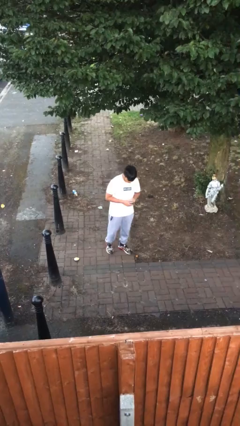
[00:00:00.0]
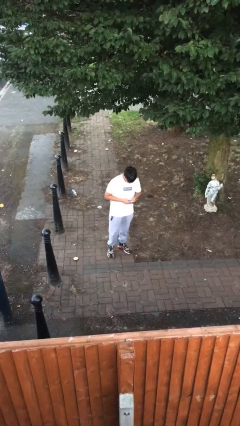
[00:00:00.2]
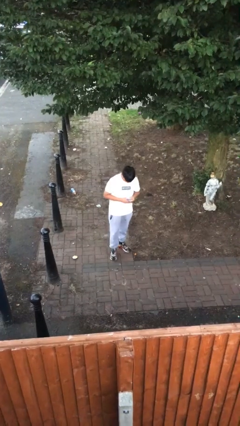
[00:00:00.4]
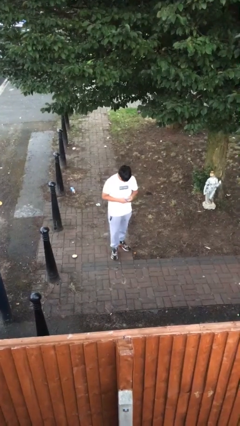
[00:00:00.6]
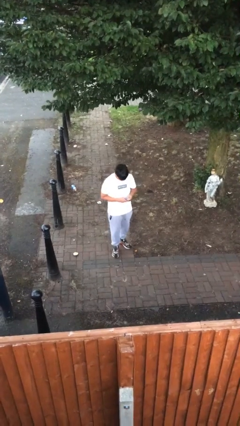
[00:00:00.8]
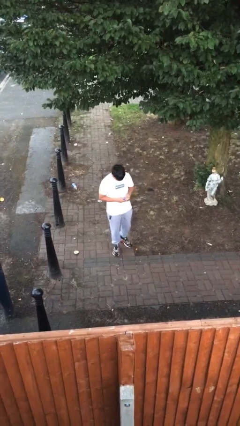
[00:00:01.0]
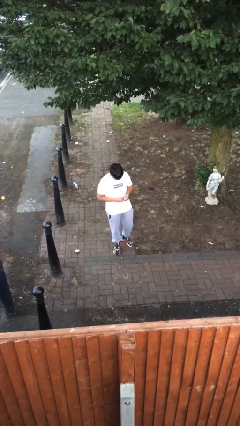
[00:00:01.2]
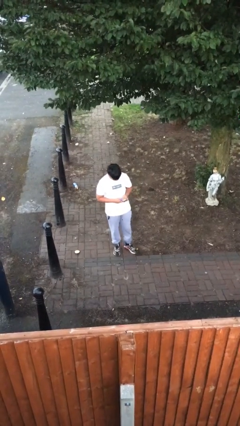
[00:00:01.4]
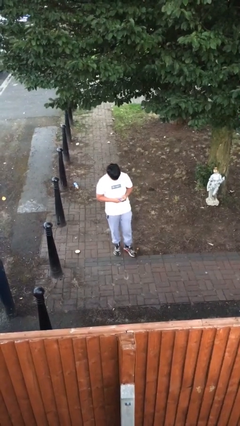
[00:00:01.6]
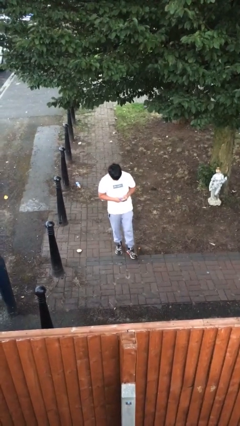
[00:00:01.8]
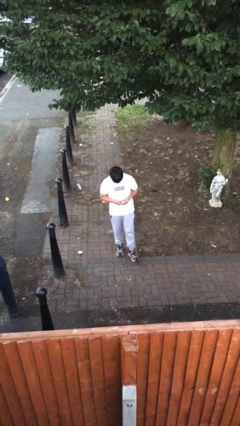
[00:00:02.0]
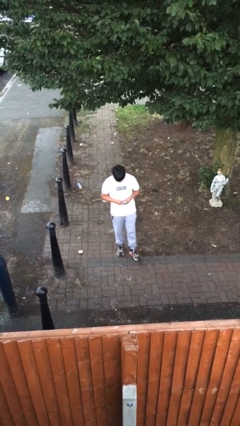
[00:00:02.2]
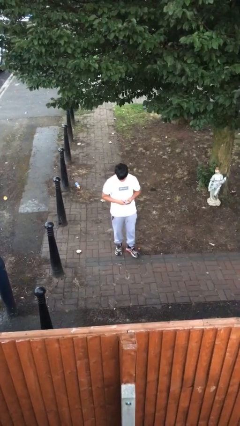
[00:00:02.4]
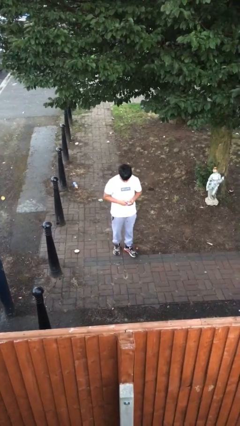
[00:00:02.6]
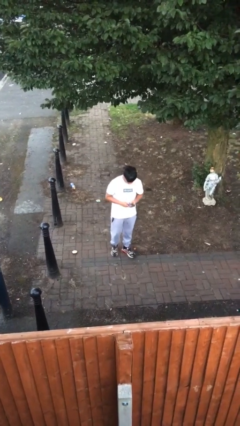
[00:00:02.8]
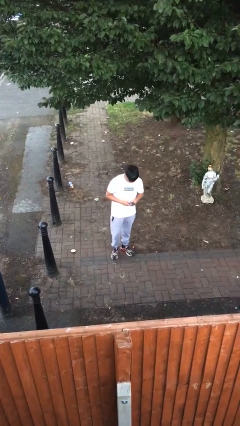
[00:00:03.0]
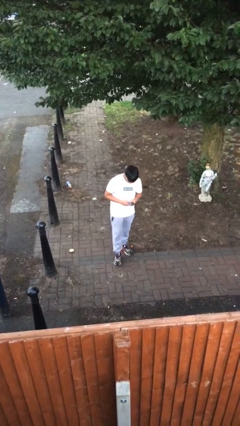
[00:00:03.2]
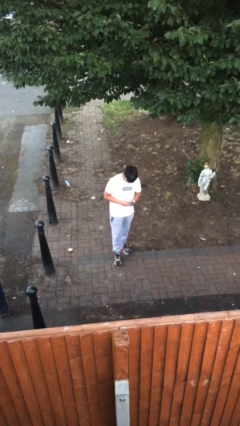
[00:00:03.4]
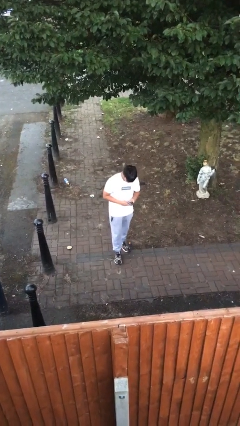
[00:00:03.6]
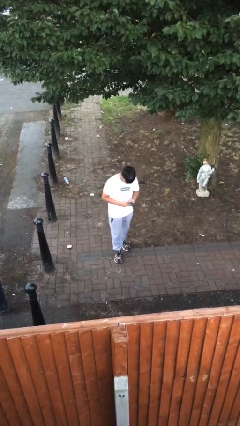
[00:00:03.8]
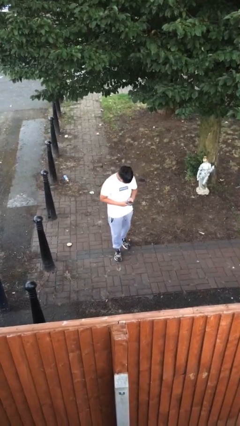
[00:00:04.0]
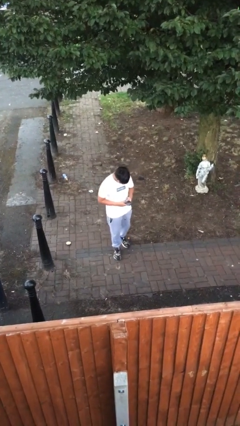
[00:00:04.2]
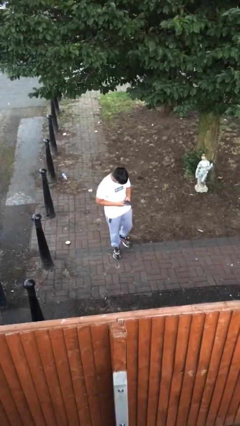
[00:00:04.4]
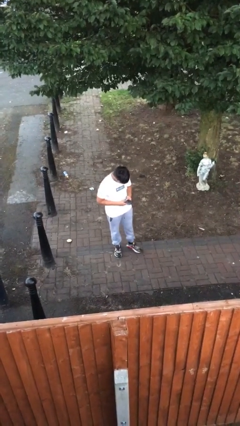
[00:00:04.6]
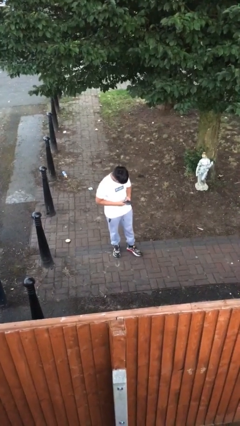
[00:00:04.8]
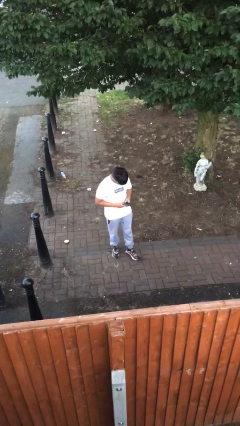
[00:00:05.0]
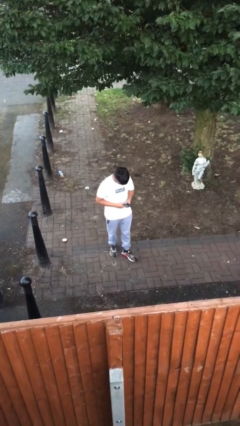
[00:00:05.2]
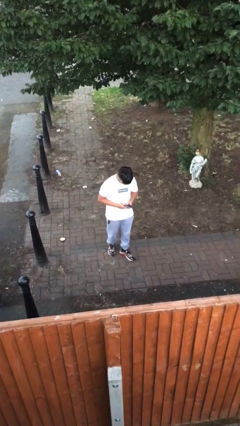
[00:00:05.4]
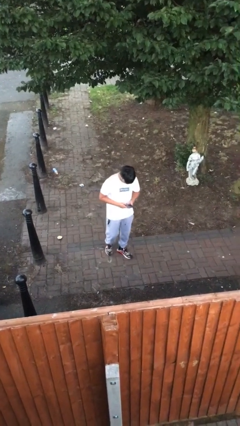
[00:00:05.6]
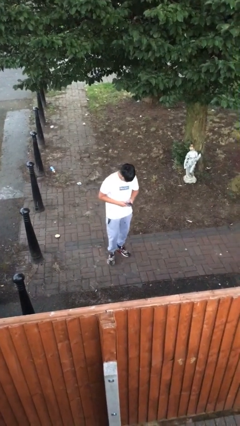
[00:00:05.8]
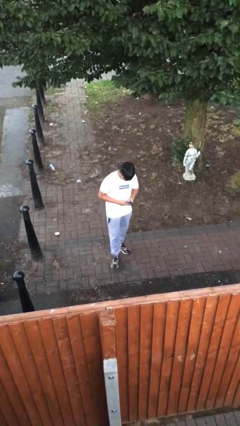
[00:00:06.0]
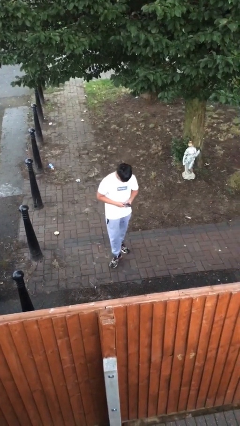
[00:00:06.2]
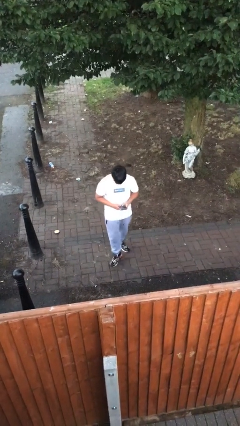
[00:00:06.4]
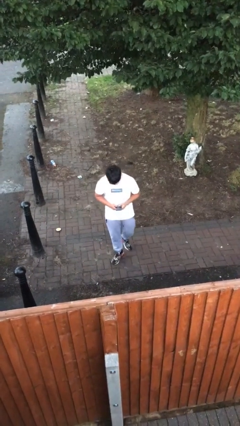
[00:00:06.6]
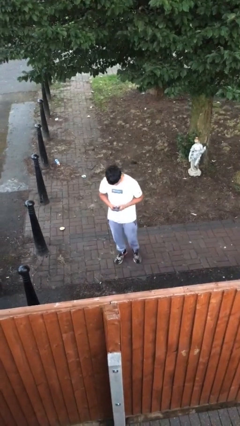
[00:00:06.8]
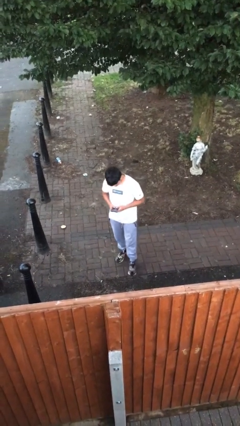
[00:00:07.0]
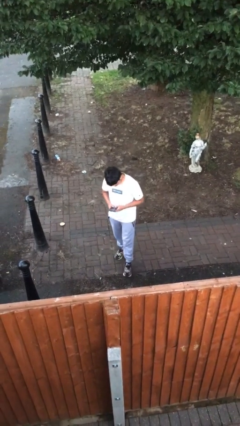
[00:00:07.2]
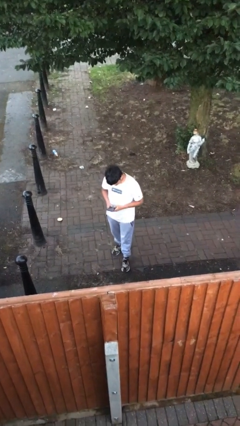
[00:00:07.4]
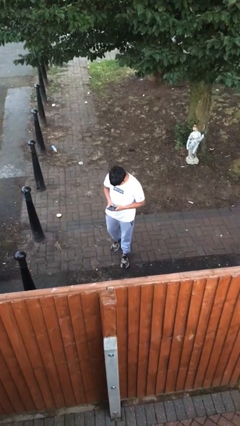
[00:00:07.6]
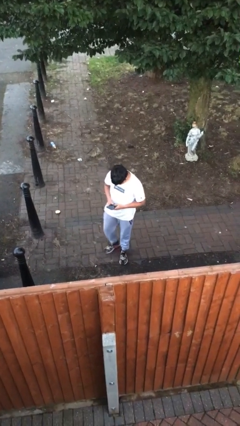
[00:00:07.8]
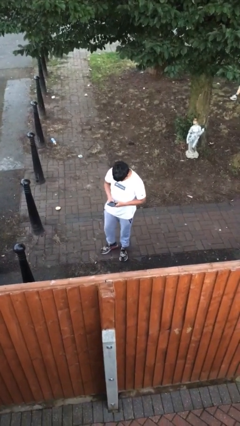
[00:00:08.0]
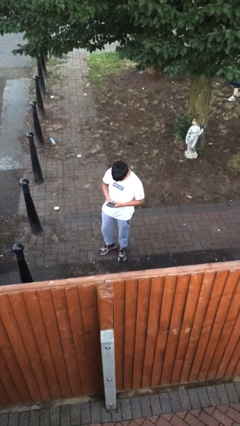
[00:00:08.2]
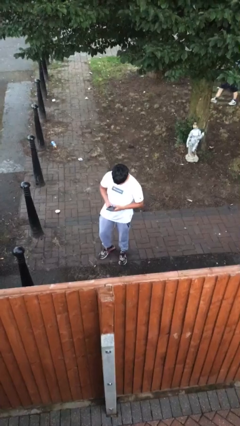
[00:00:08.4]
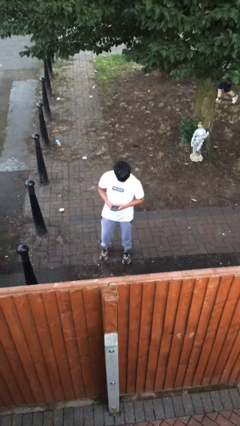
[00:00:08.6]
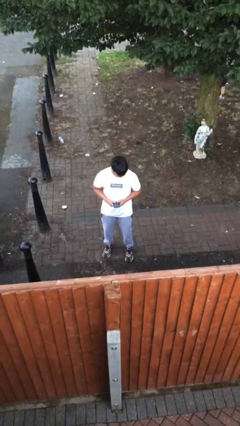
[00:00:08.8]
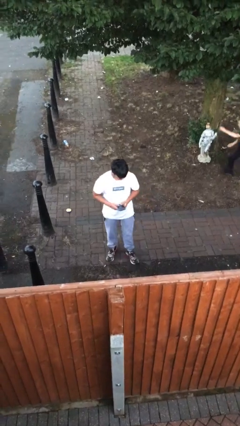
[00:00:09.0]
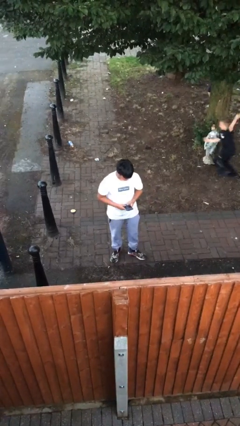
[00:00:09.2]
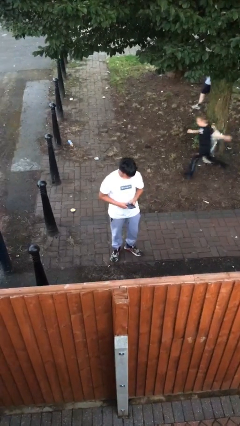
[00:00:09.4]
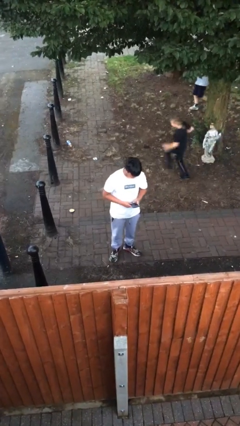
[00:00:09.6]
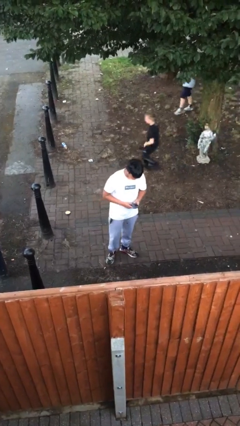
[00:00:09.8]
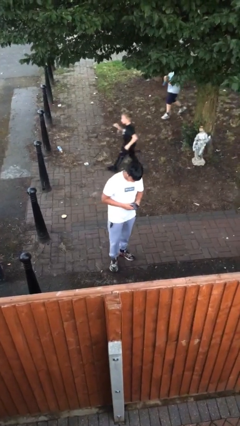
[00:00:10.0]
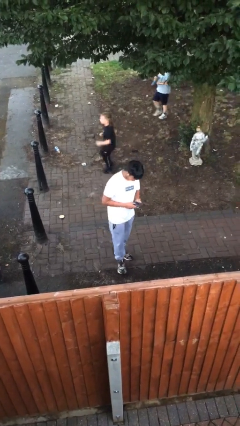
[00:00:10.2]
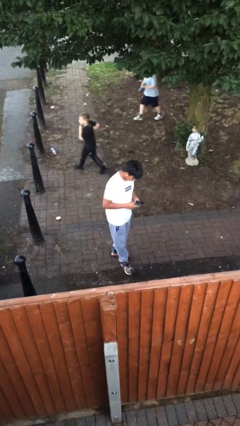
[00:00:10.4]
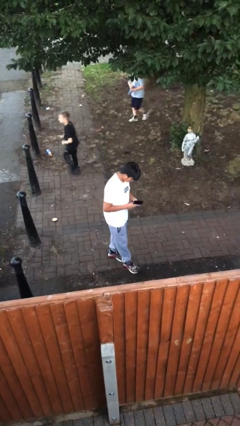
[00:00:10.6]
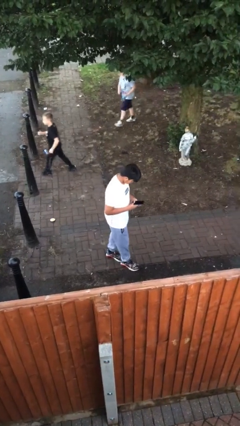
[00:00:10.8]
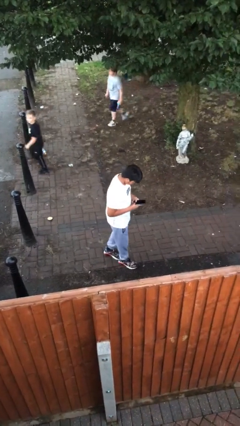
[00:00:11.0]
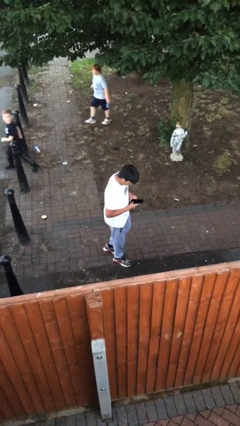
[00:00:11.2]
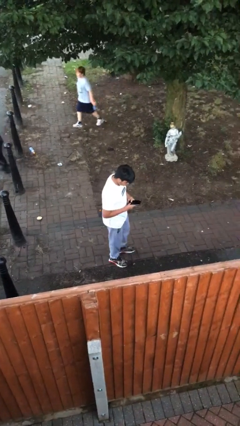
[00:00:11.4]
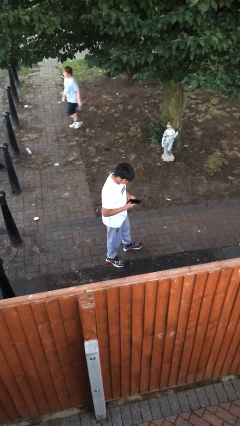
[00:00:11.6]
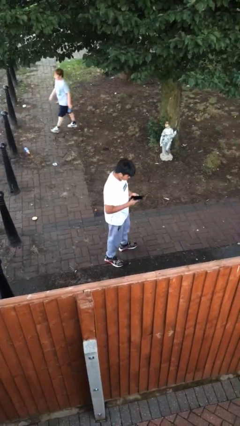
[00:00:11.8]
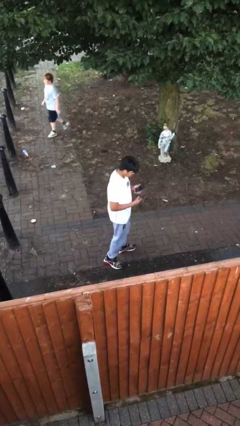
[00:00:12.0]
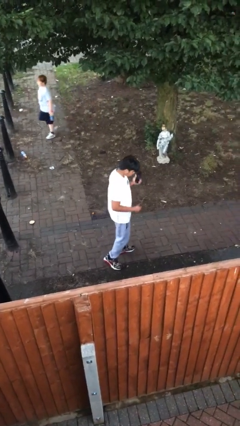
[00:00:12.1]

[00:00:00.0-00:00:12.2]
person texts on phone

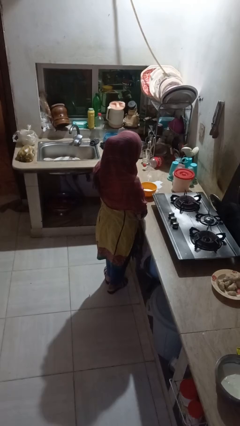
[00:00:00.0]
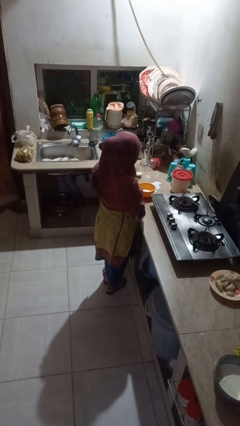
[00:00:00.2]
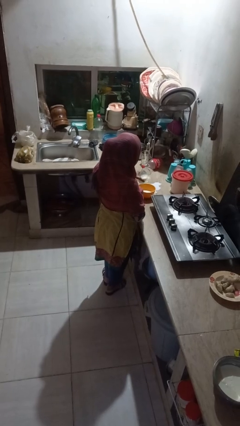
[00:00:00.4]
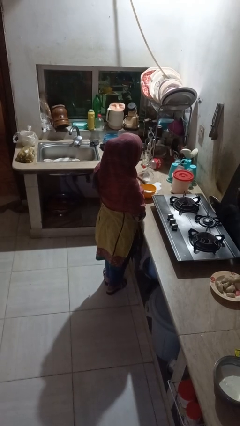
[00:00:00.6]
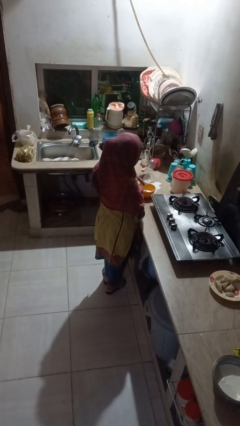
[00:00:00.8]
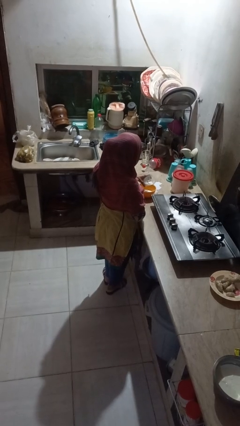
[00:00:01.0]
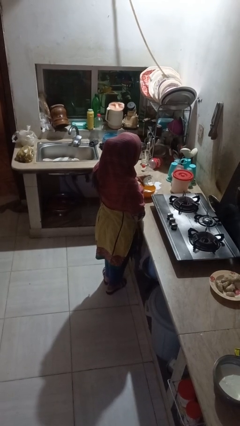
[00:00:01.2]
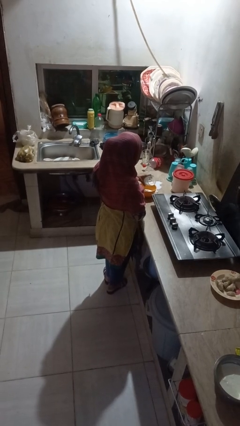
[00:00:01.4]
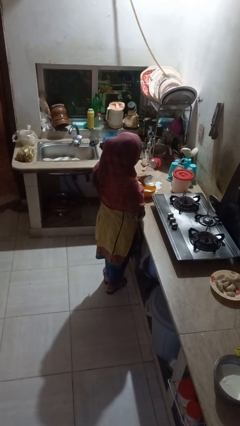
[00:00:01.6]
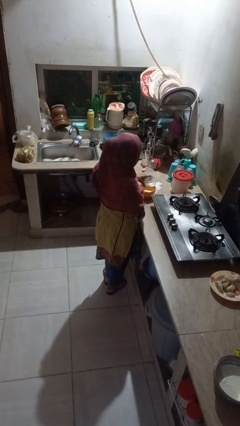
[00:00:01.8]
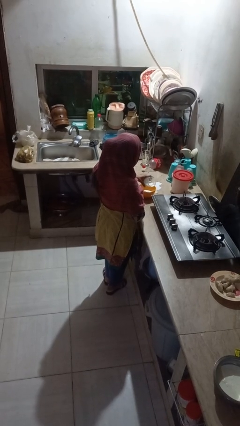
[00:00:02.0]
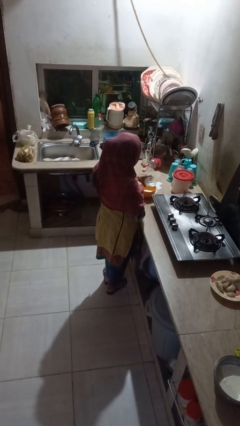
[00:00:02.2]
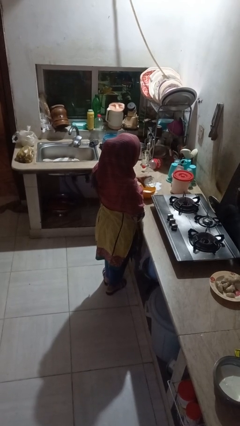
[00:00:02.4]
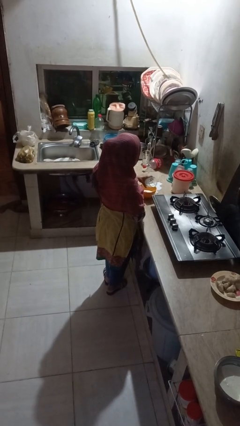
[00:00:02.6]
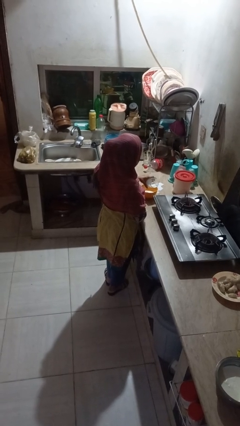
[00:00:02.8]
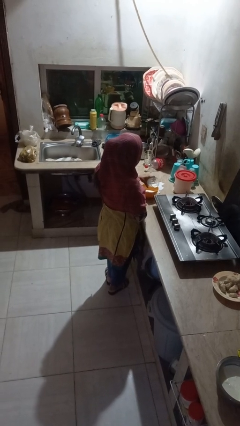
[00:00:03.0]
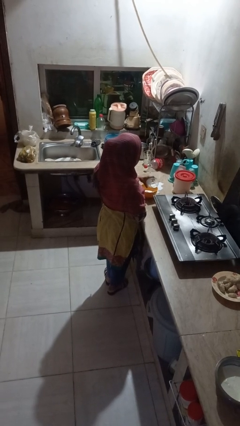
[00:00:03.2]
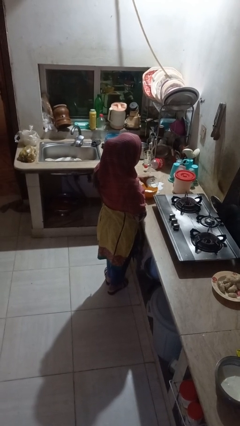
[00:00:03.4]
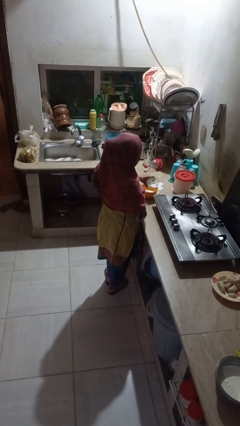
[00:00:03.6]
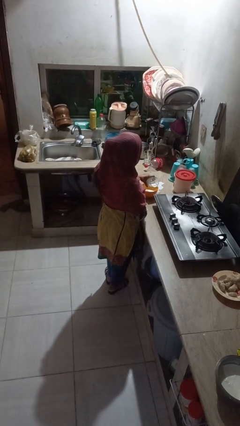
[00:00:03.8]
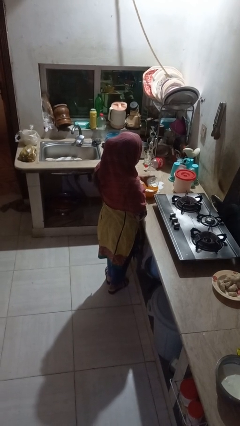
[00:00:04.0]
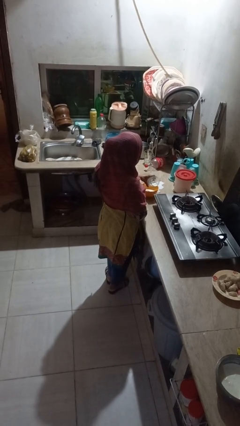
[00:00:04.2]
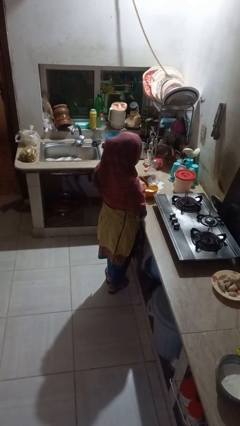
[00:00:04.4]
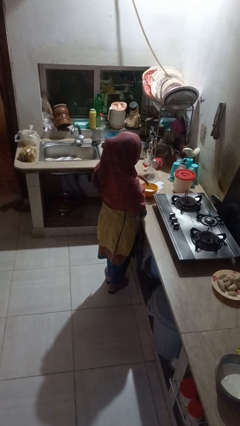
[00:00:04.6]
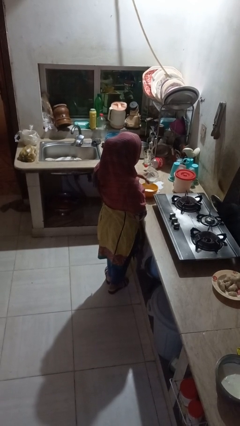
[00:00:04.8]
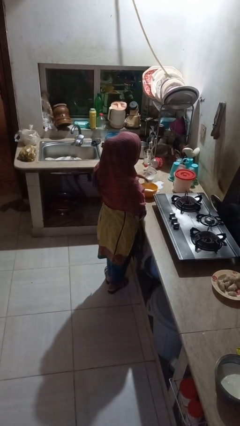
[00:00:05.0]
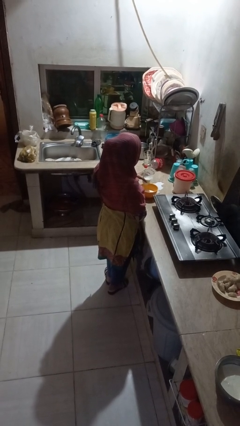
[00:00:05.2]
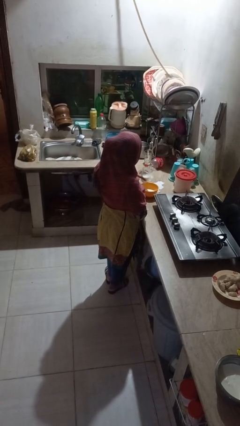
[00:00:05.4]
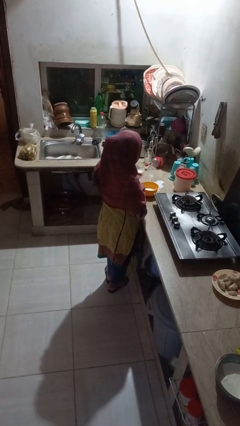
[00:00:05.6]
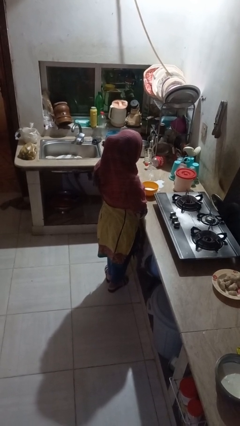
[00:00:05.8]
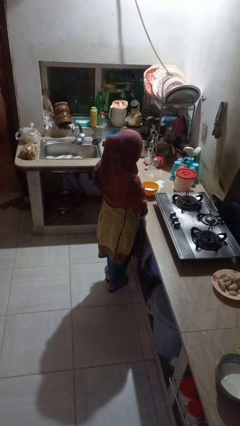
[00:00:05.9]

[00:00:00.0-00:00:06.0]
person pours into bowl
